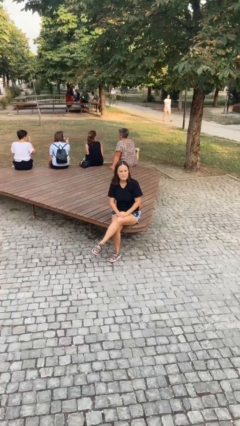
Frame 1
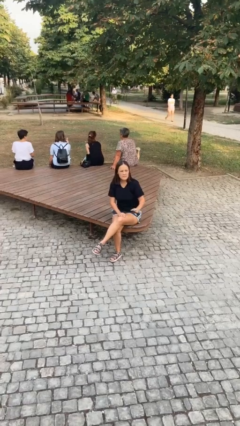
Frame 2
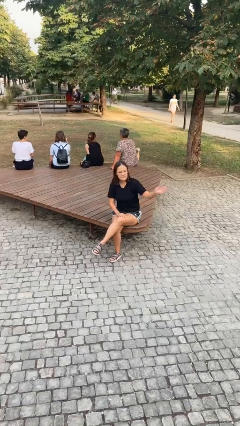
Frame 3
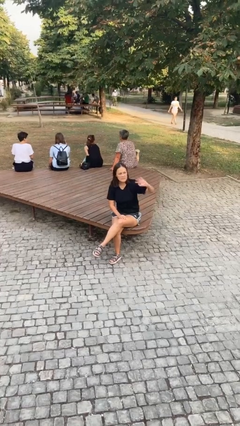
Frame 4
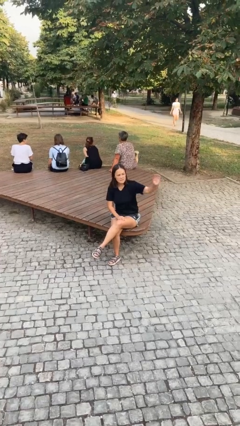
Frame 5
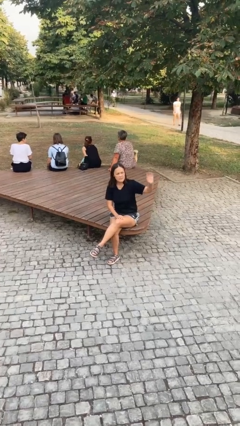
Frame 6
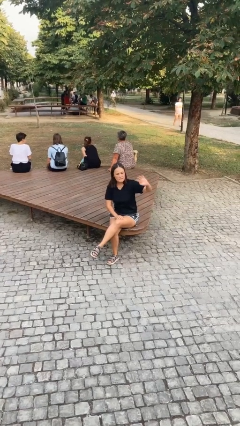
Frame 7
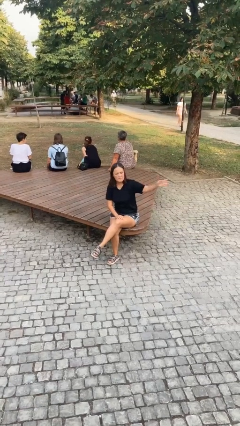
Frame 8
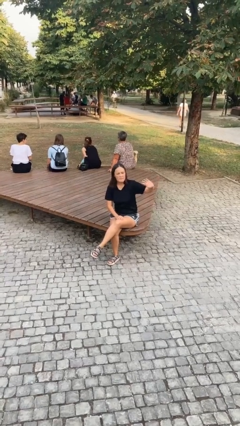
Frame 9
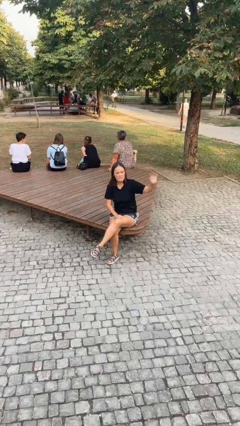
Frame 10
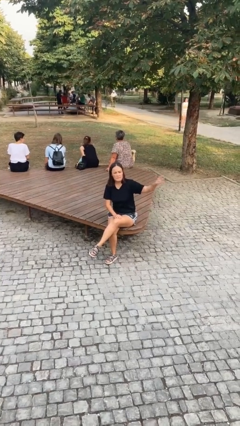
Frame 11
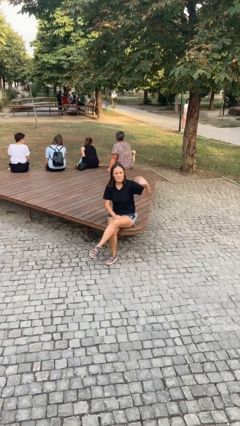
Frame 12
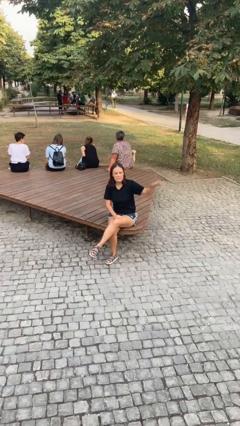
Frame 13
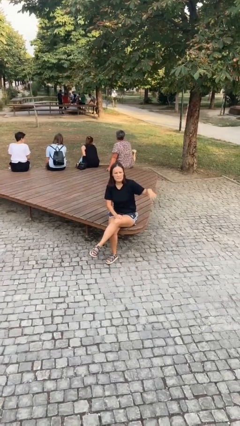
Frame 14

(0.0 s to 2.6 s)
person waves at person

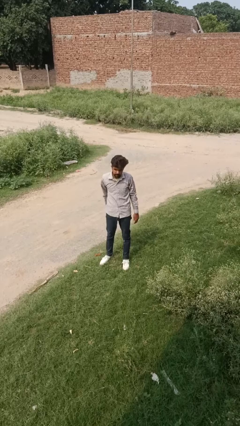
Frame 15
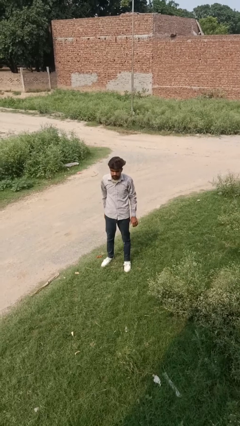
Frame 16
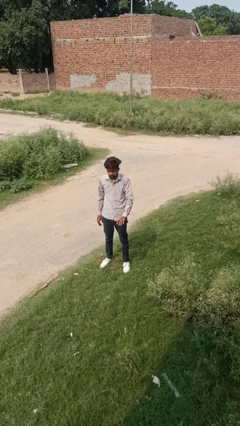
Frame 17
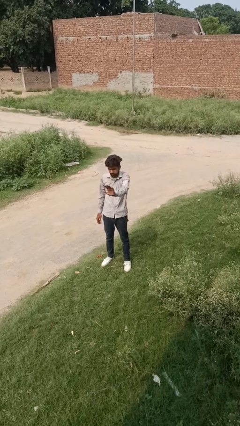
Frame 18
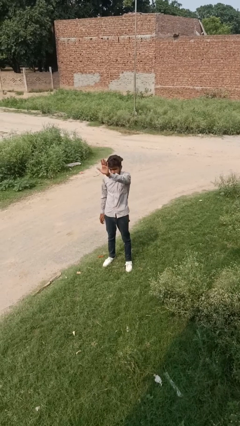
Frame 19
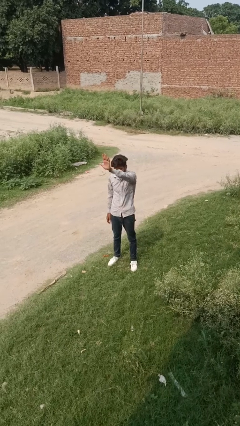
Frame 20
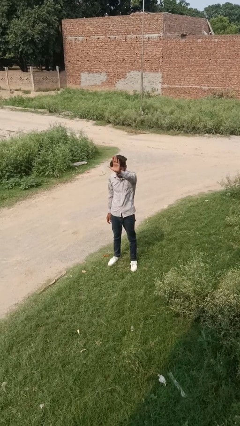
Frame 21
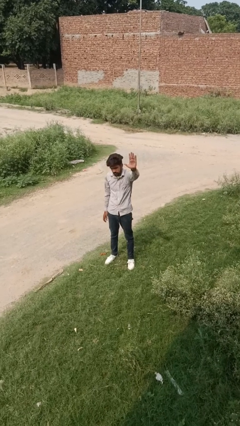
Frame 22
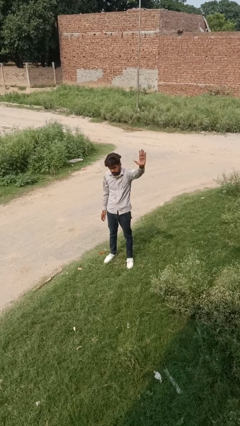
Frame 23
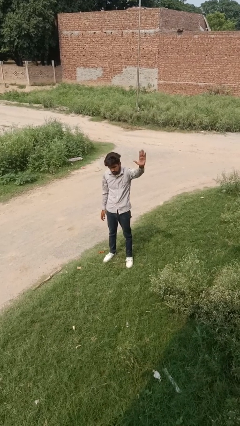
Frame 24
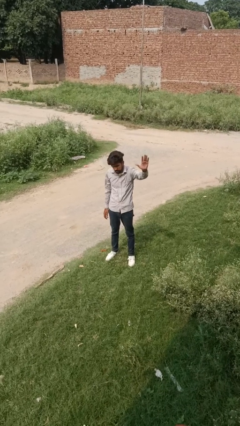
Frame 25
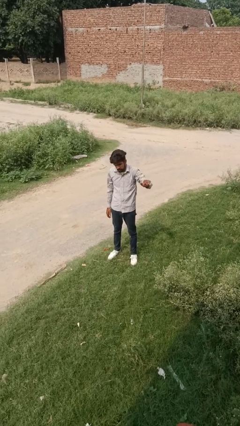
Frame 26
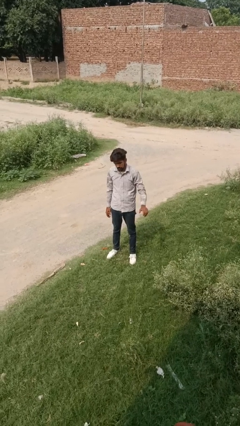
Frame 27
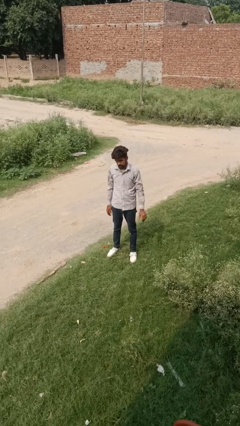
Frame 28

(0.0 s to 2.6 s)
person gestures swipe left

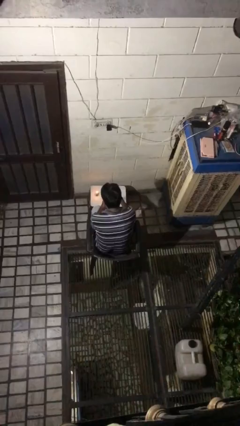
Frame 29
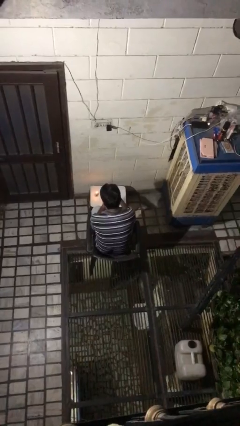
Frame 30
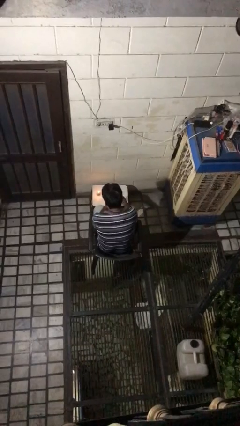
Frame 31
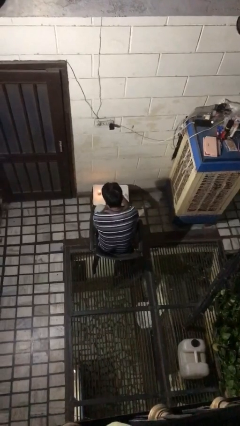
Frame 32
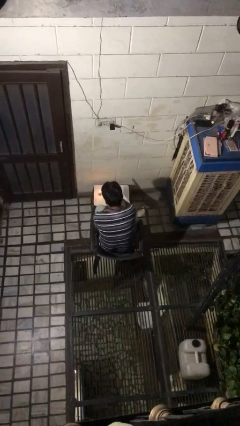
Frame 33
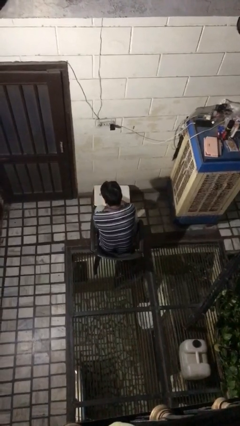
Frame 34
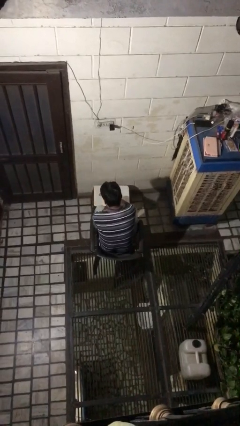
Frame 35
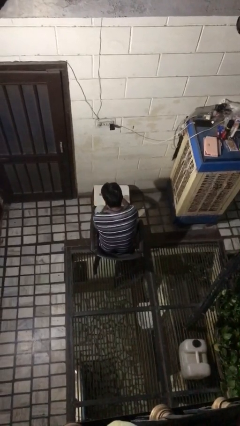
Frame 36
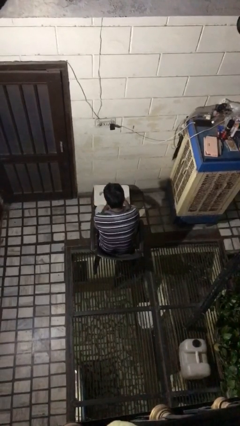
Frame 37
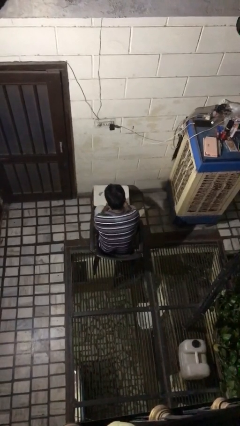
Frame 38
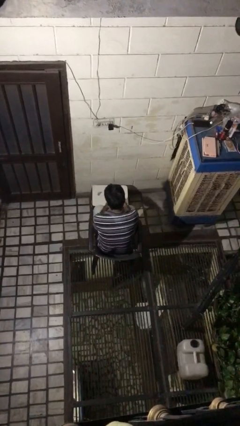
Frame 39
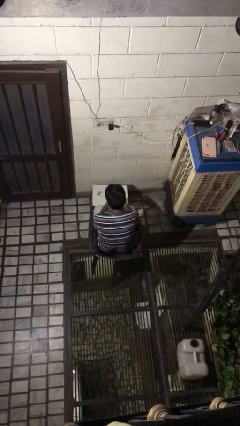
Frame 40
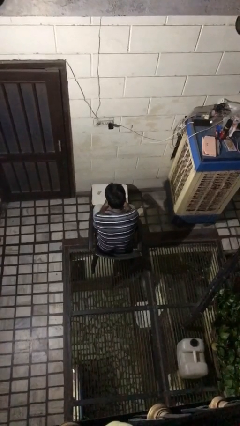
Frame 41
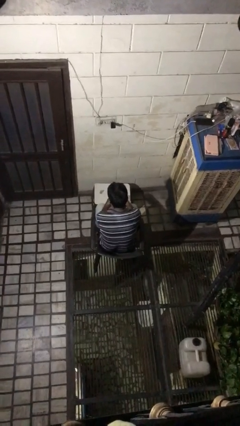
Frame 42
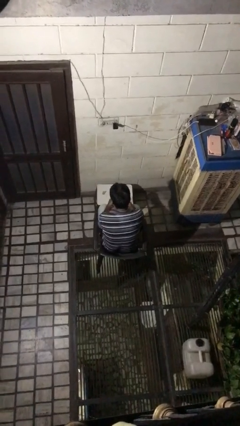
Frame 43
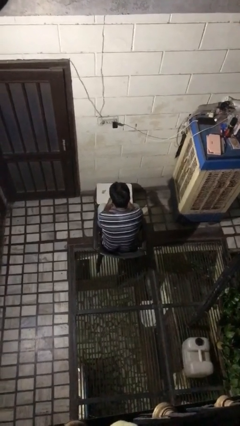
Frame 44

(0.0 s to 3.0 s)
person extinguishes candle

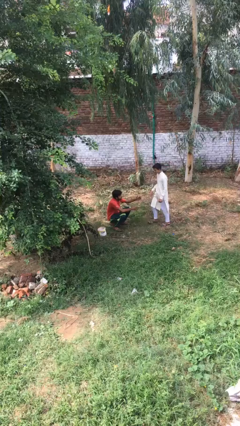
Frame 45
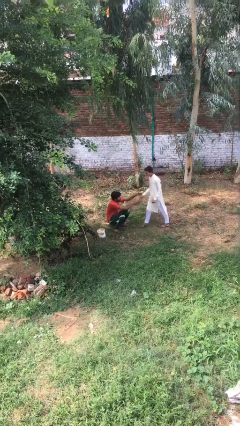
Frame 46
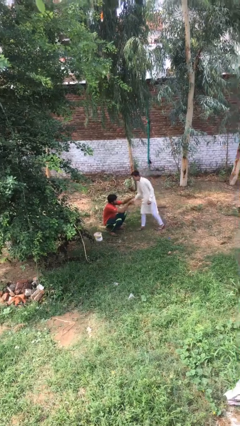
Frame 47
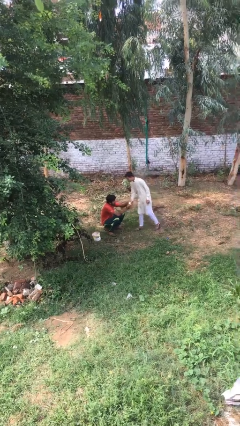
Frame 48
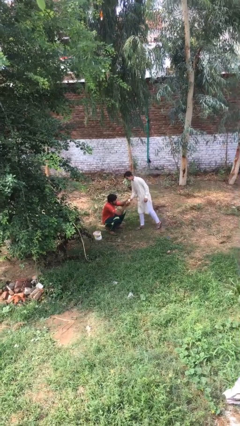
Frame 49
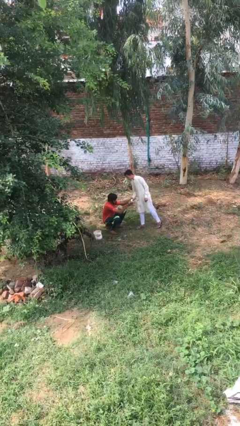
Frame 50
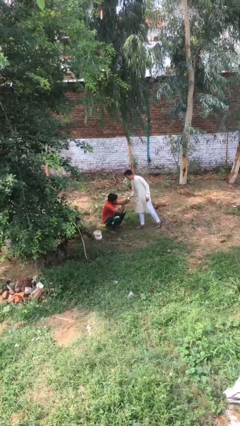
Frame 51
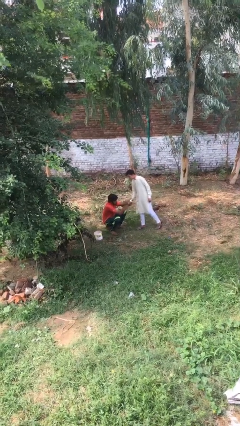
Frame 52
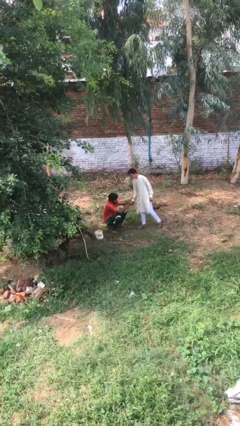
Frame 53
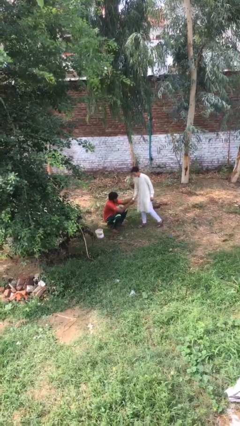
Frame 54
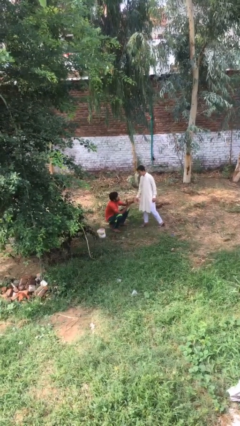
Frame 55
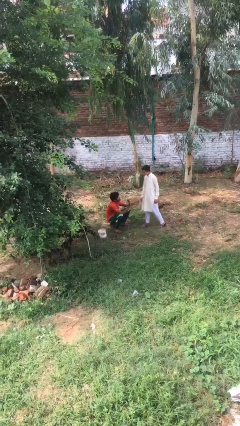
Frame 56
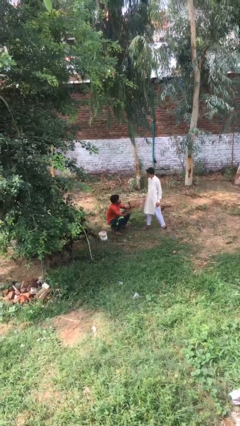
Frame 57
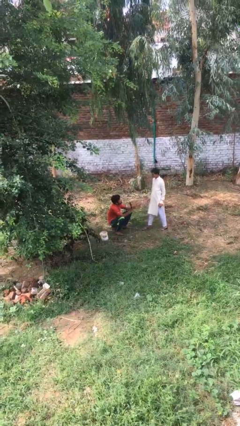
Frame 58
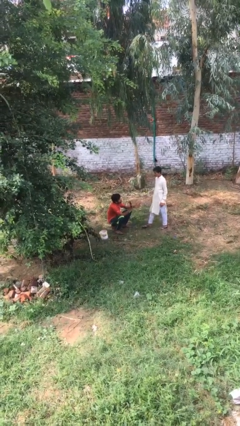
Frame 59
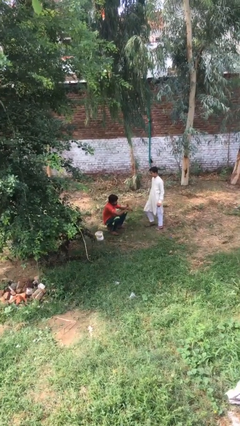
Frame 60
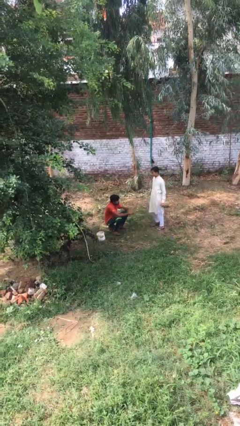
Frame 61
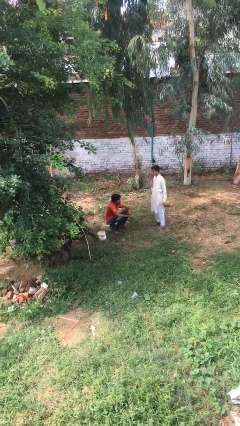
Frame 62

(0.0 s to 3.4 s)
person shakes hand

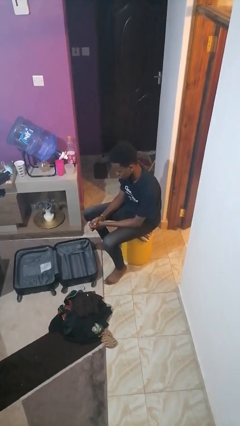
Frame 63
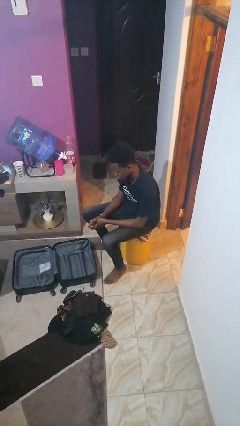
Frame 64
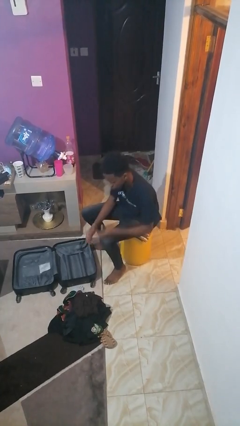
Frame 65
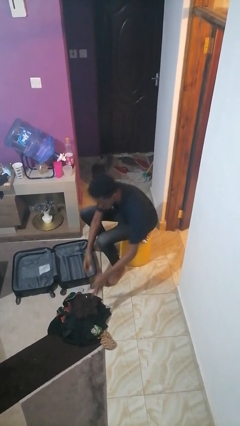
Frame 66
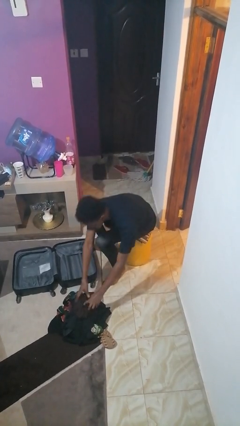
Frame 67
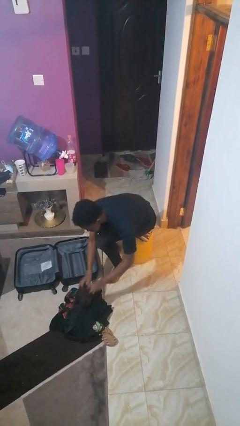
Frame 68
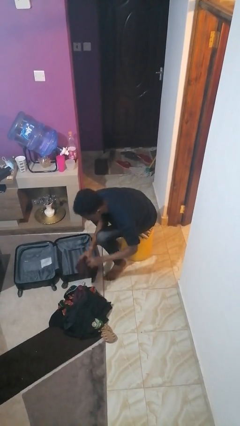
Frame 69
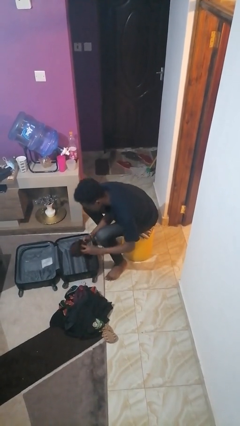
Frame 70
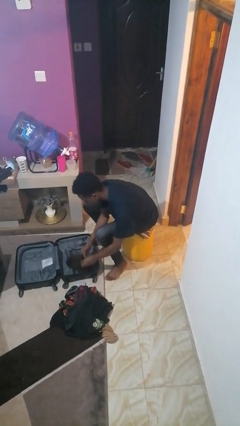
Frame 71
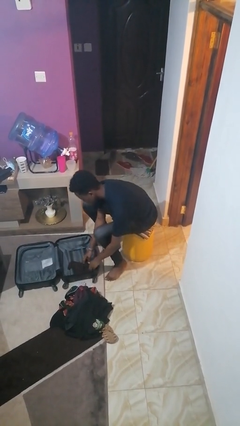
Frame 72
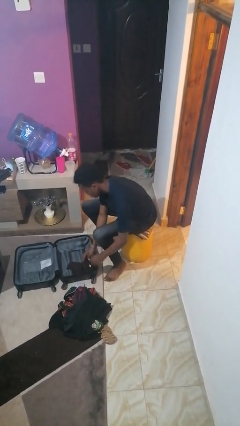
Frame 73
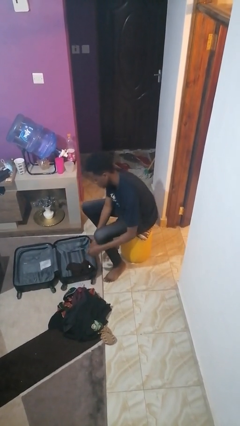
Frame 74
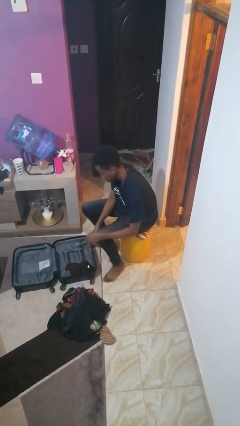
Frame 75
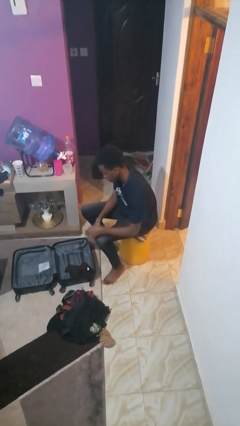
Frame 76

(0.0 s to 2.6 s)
person loads clothes into suitcase

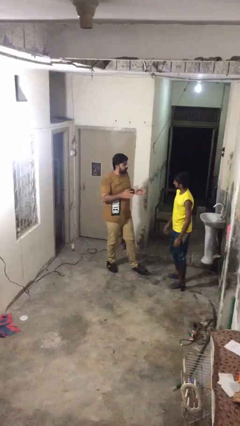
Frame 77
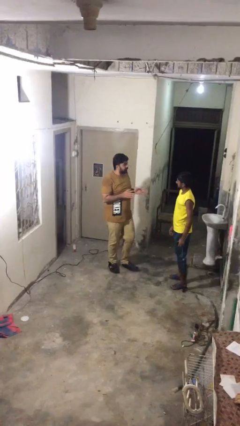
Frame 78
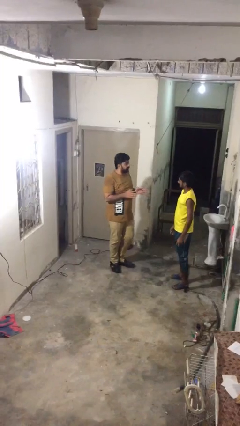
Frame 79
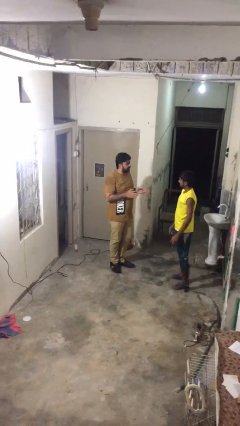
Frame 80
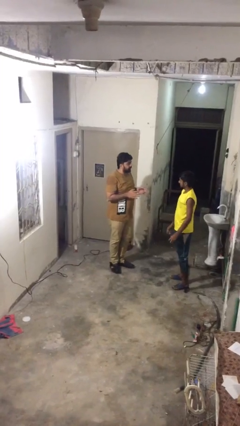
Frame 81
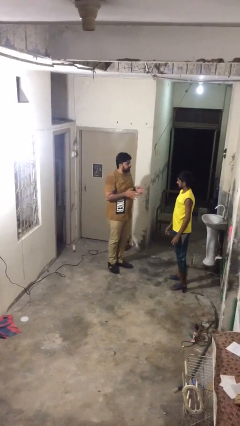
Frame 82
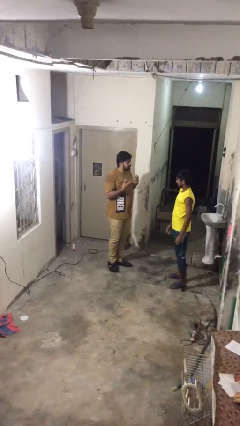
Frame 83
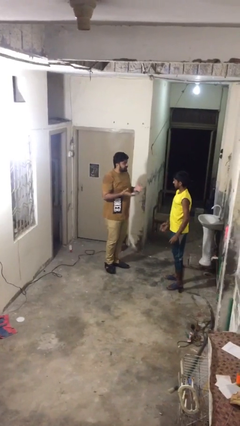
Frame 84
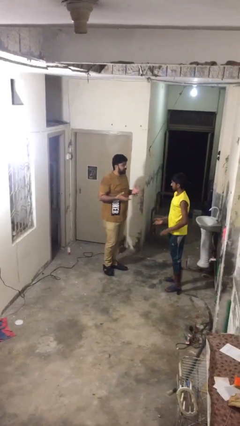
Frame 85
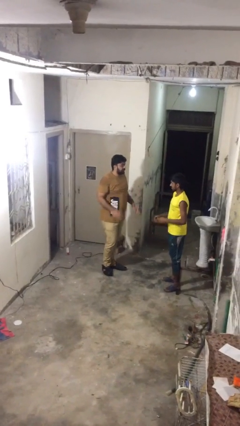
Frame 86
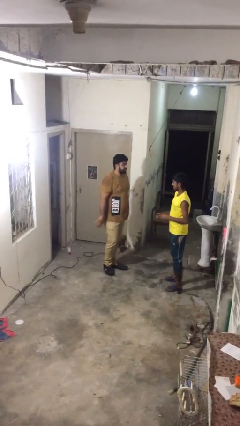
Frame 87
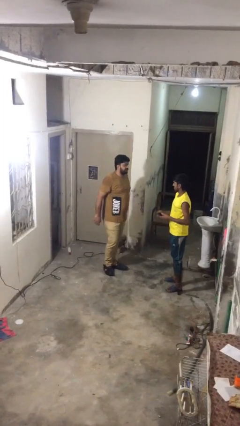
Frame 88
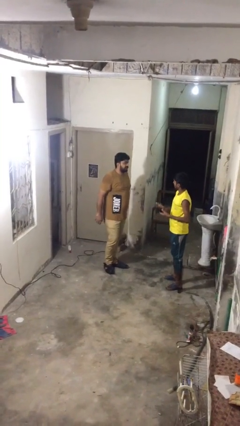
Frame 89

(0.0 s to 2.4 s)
person talks to person

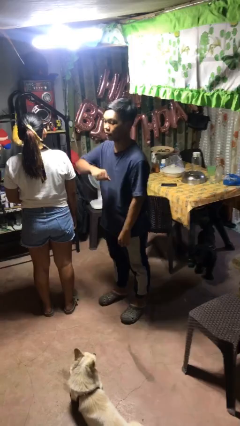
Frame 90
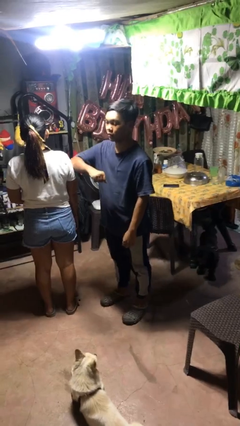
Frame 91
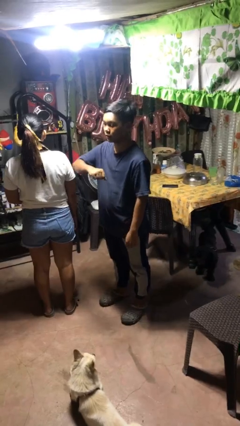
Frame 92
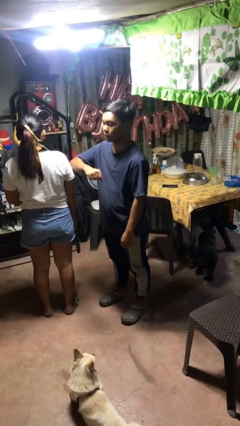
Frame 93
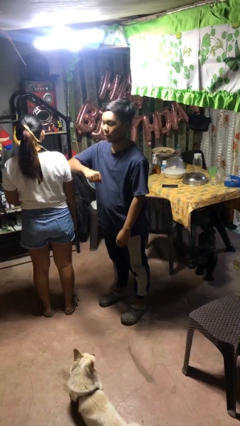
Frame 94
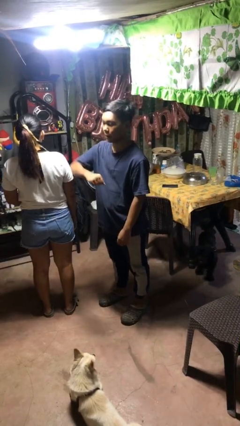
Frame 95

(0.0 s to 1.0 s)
person nudges person with elbow
